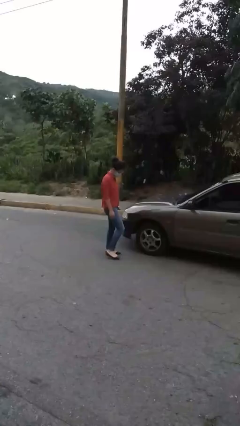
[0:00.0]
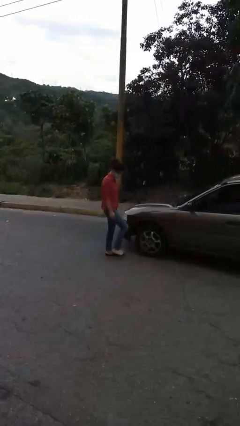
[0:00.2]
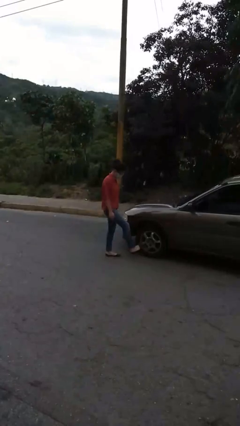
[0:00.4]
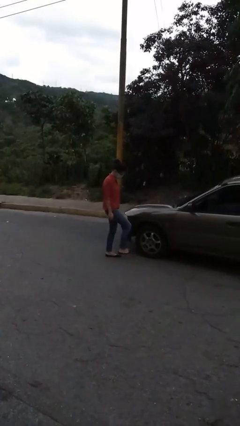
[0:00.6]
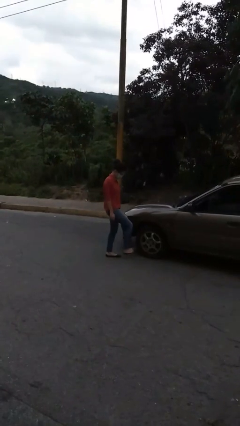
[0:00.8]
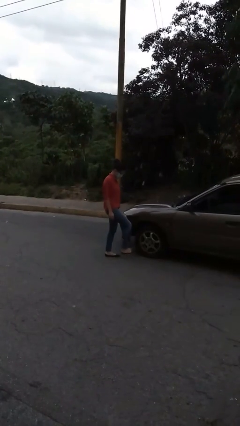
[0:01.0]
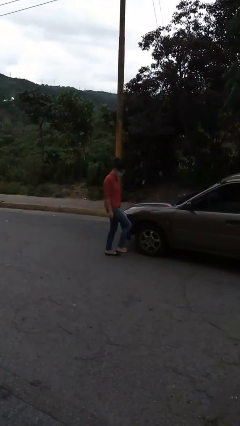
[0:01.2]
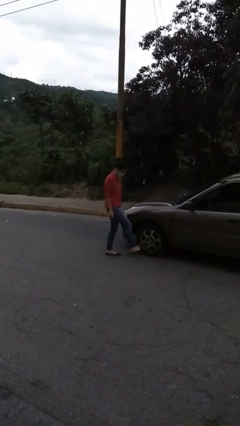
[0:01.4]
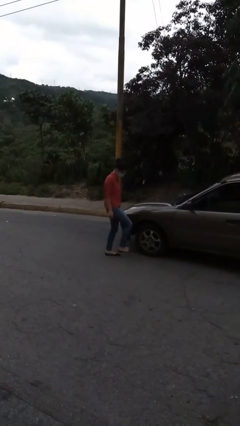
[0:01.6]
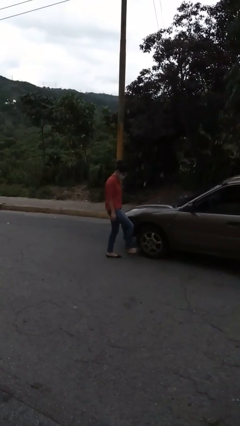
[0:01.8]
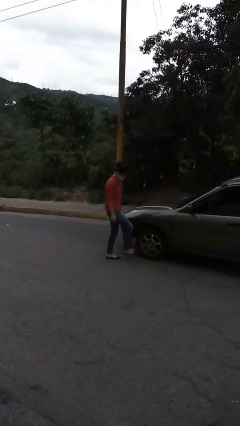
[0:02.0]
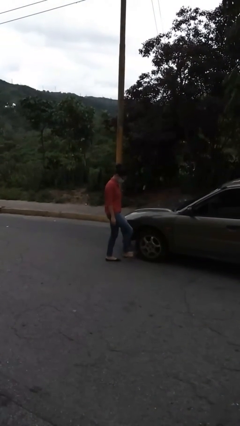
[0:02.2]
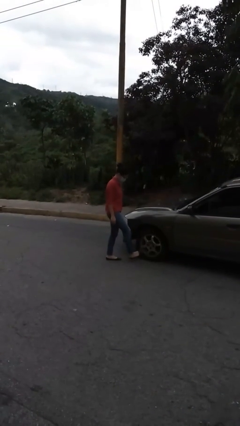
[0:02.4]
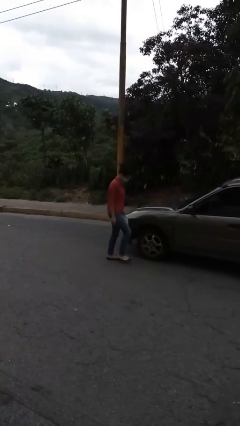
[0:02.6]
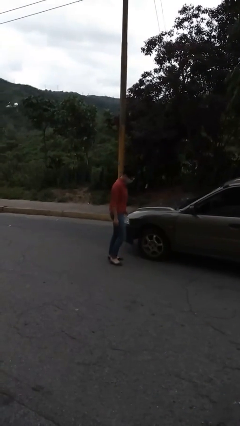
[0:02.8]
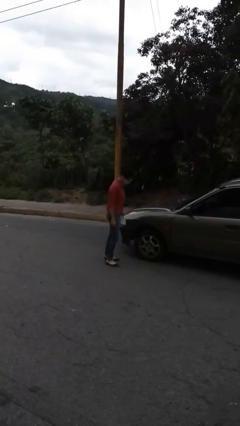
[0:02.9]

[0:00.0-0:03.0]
person kicks car tires

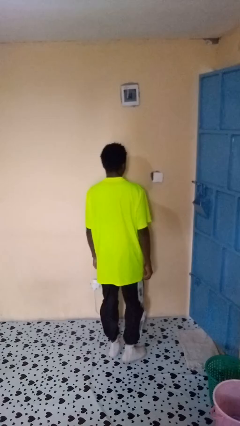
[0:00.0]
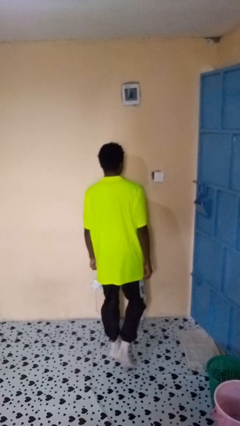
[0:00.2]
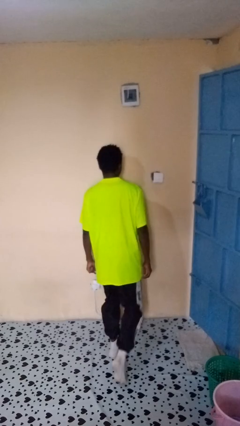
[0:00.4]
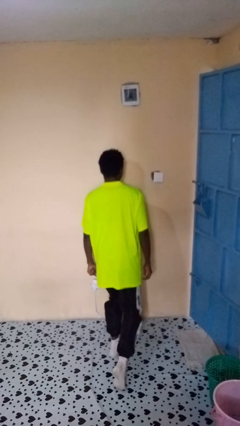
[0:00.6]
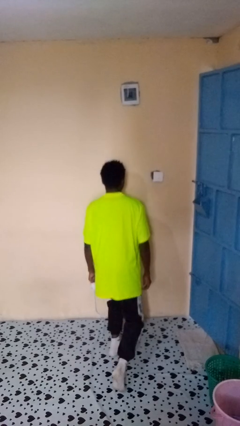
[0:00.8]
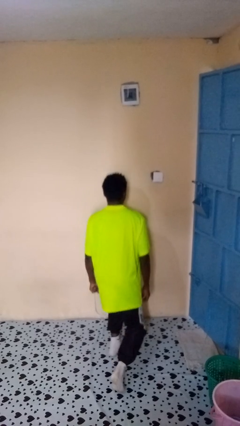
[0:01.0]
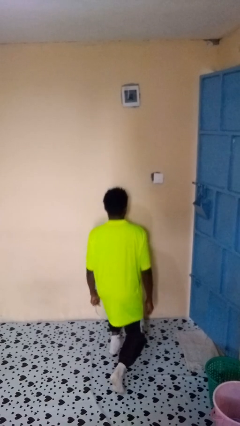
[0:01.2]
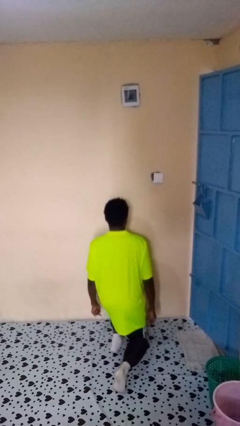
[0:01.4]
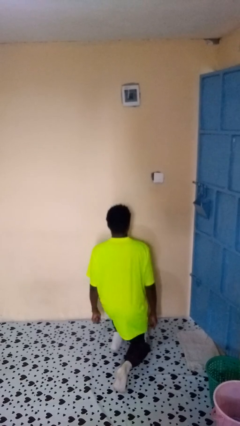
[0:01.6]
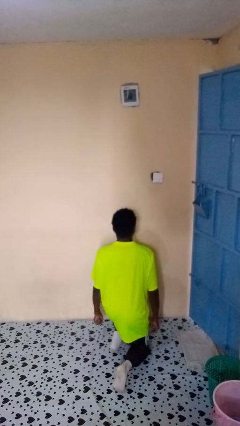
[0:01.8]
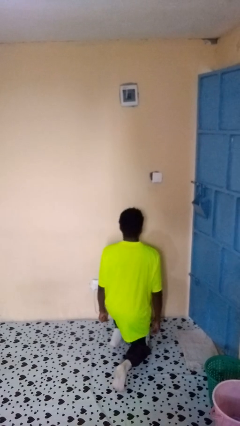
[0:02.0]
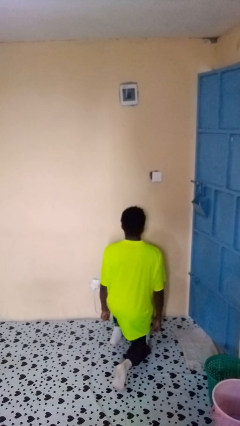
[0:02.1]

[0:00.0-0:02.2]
person kneels

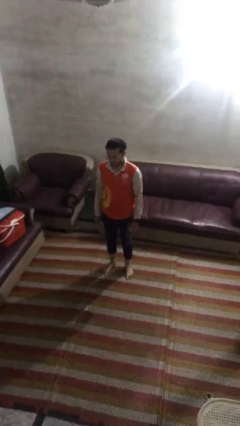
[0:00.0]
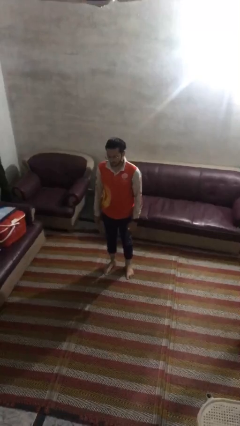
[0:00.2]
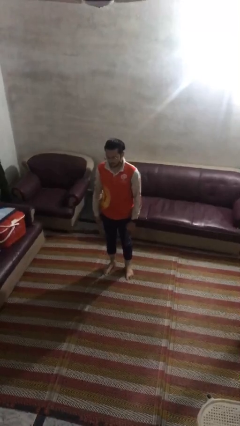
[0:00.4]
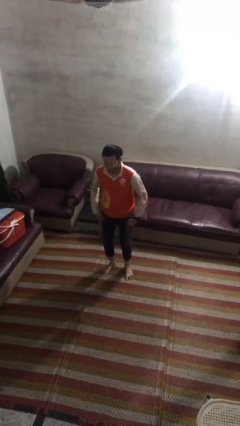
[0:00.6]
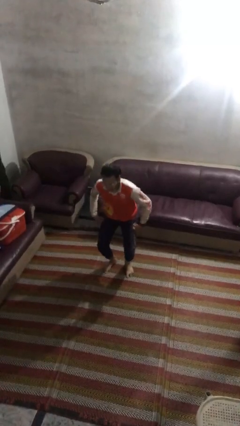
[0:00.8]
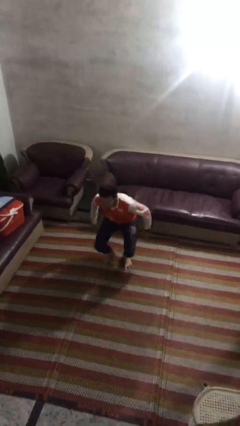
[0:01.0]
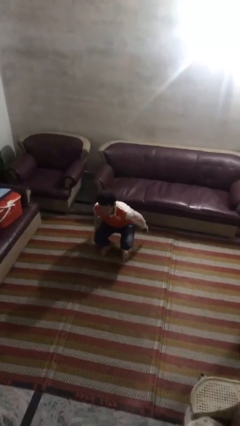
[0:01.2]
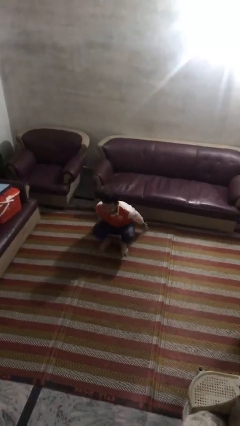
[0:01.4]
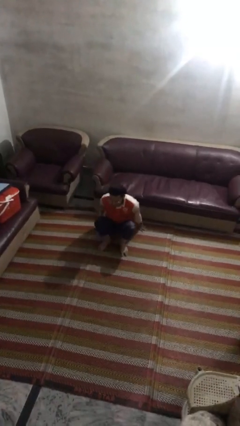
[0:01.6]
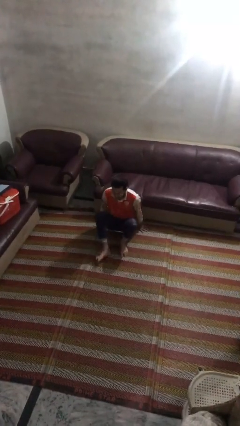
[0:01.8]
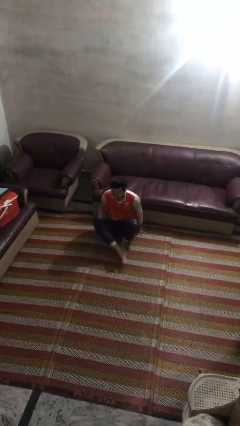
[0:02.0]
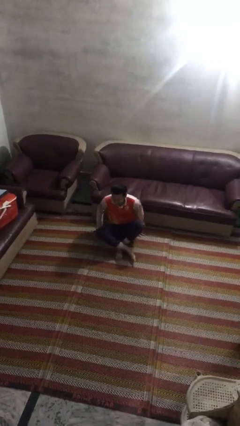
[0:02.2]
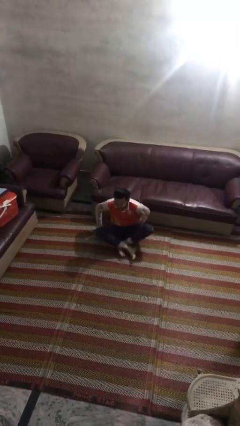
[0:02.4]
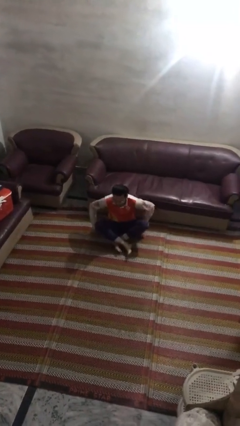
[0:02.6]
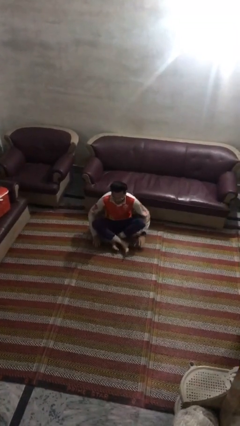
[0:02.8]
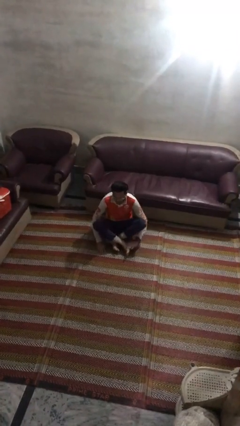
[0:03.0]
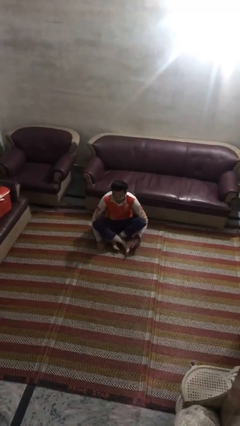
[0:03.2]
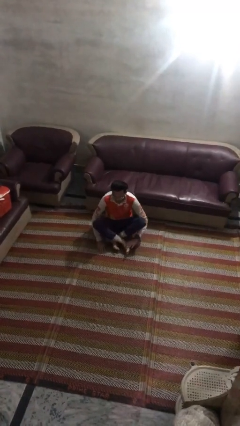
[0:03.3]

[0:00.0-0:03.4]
person sits crisscross

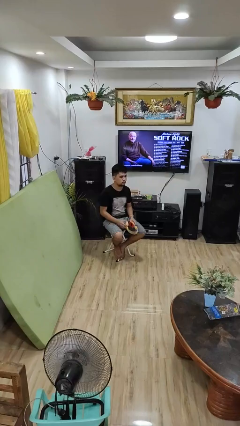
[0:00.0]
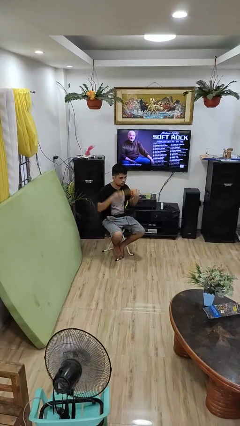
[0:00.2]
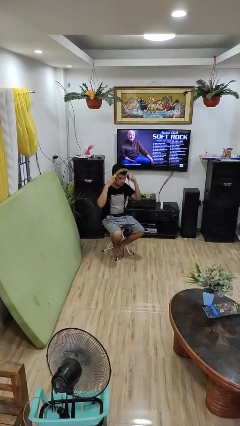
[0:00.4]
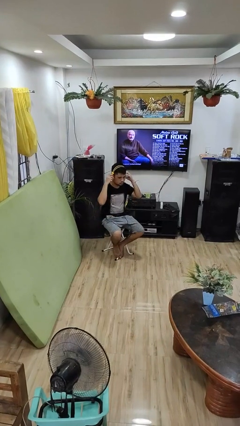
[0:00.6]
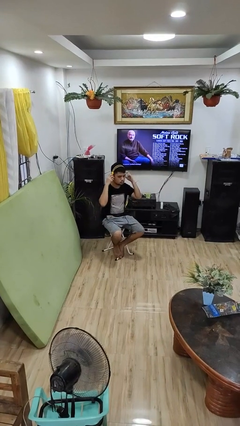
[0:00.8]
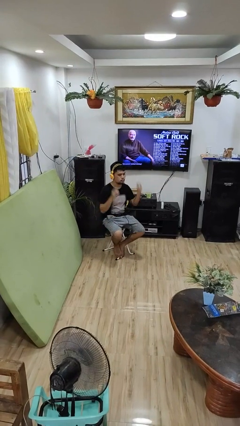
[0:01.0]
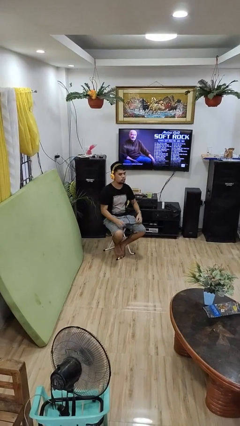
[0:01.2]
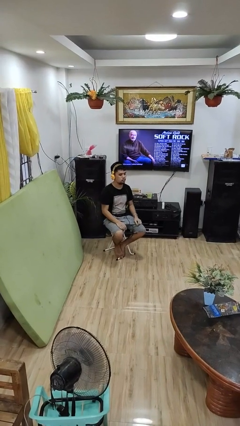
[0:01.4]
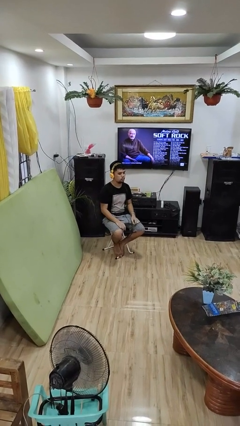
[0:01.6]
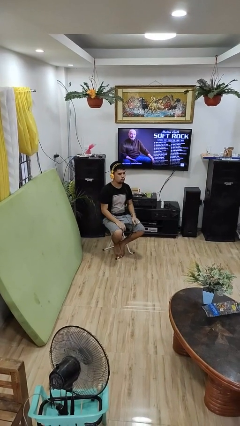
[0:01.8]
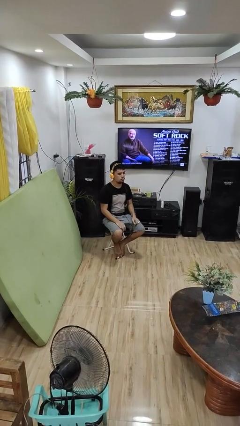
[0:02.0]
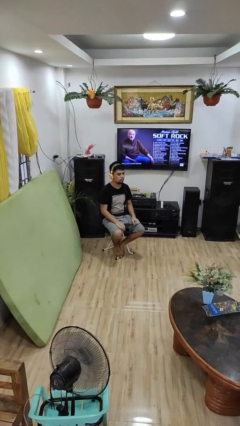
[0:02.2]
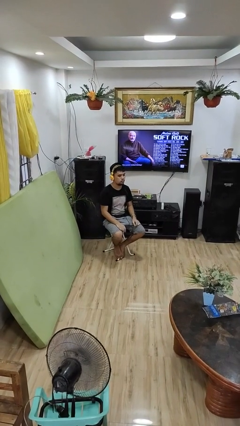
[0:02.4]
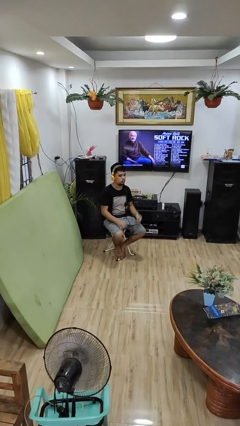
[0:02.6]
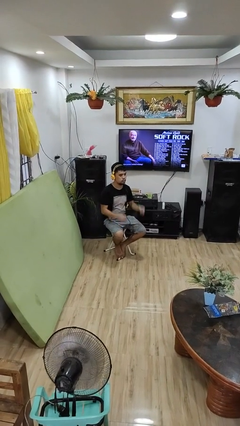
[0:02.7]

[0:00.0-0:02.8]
person puts on headphones

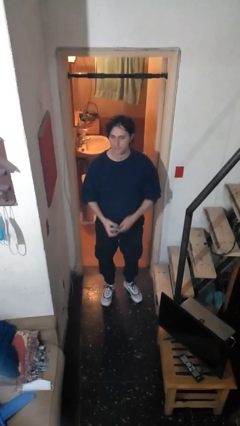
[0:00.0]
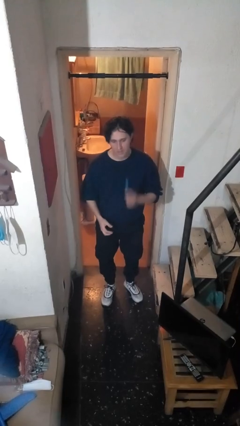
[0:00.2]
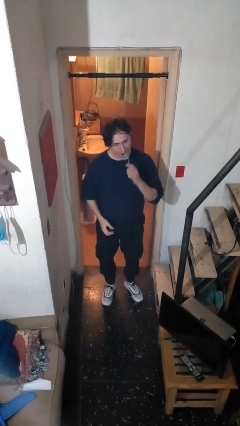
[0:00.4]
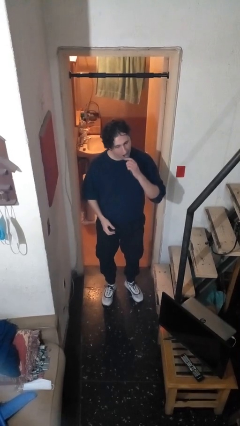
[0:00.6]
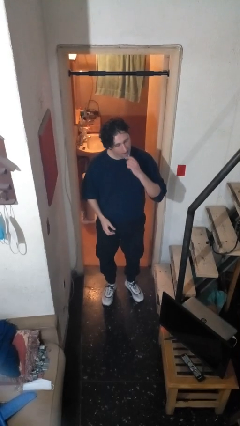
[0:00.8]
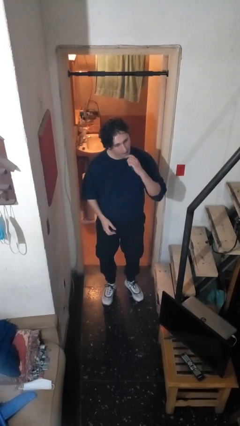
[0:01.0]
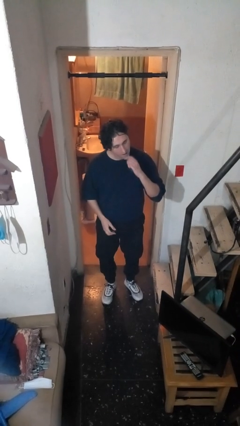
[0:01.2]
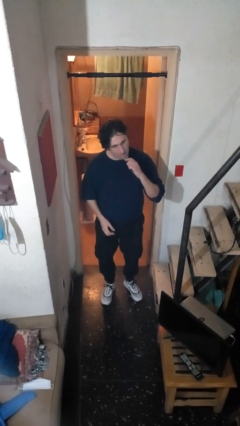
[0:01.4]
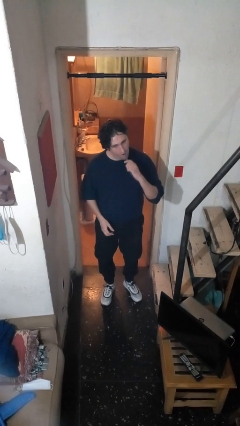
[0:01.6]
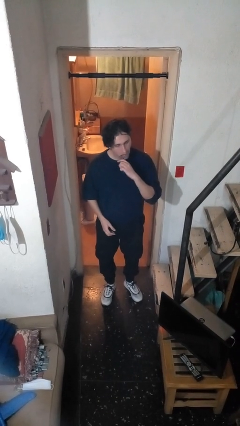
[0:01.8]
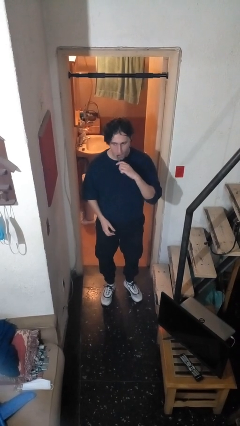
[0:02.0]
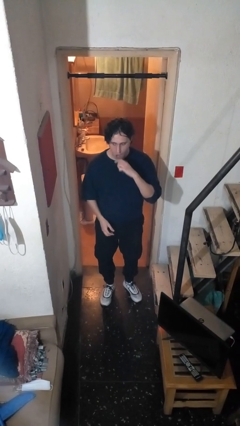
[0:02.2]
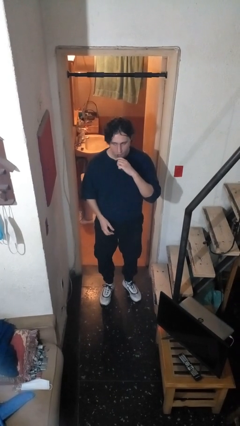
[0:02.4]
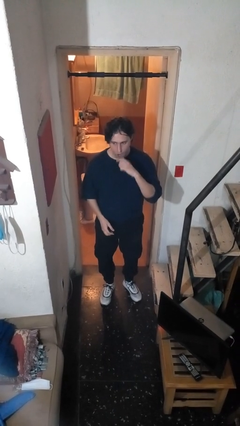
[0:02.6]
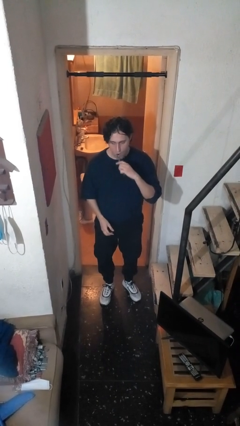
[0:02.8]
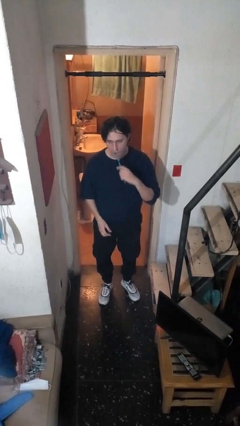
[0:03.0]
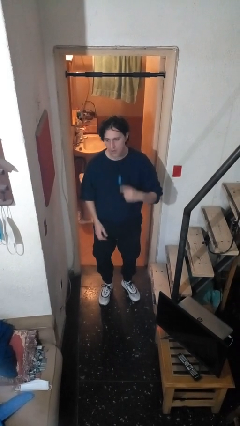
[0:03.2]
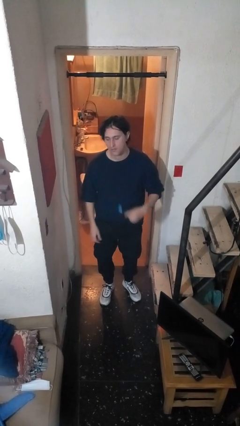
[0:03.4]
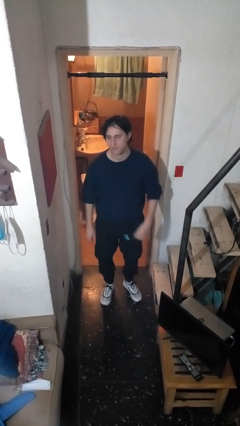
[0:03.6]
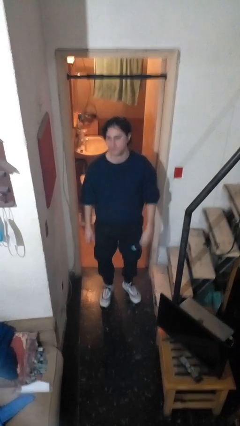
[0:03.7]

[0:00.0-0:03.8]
person brushes teeth

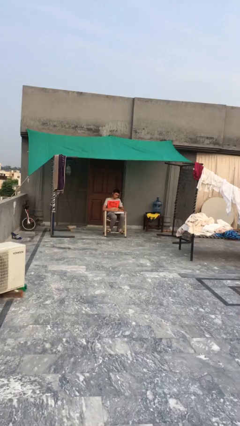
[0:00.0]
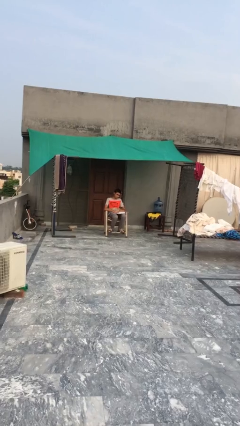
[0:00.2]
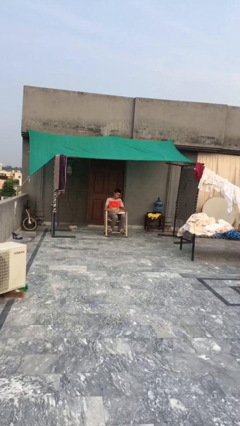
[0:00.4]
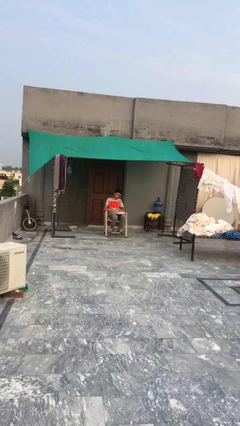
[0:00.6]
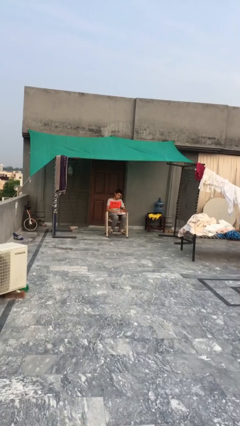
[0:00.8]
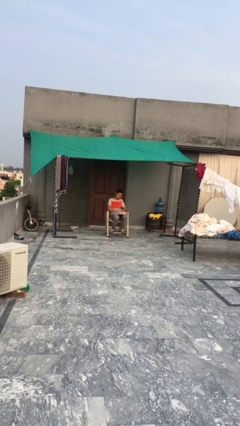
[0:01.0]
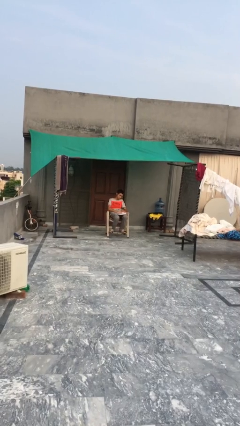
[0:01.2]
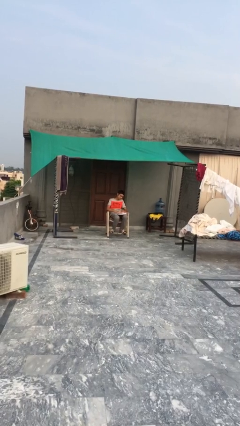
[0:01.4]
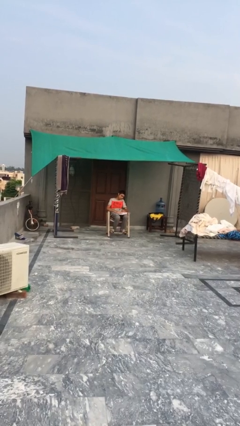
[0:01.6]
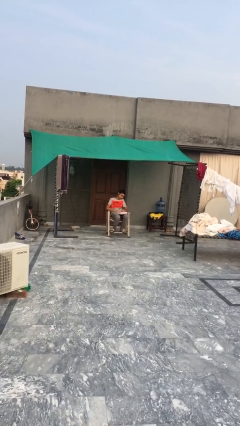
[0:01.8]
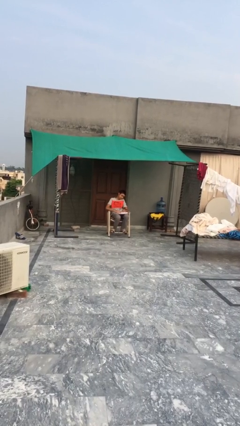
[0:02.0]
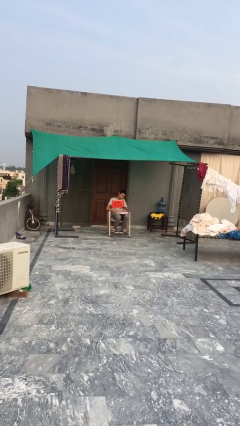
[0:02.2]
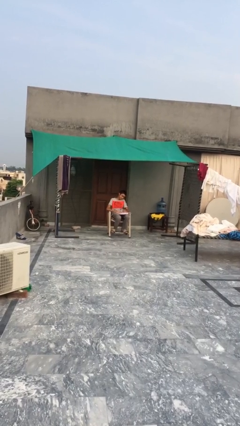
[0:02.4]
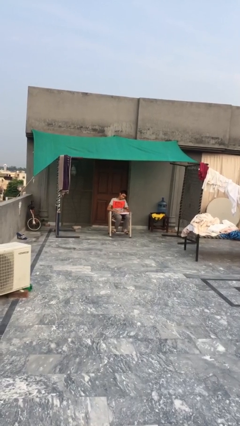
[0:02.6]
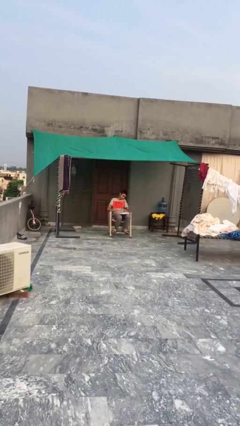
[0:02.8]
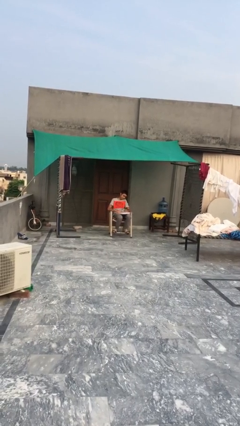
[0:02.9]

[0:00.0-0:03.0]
person reads document
